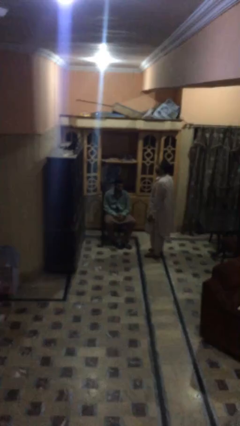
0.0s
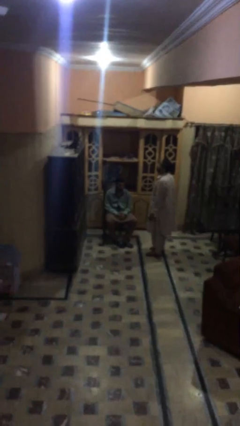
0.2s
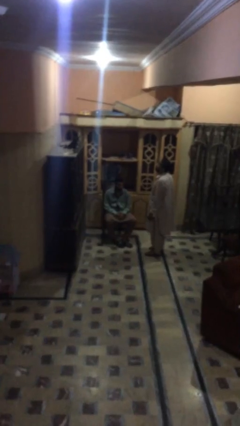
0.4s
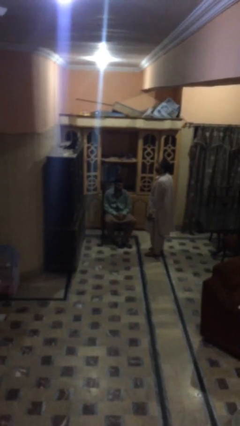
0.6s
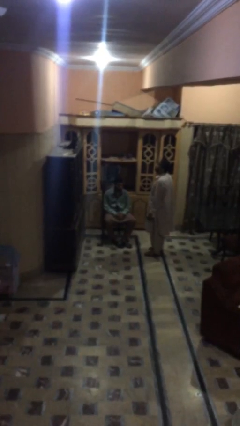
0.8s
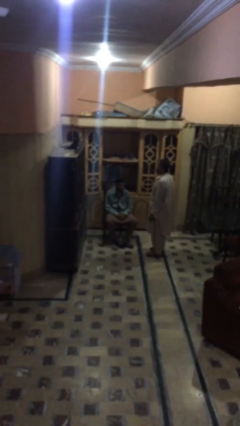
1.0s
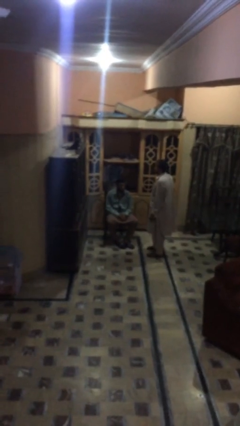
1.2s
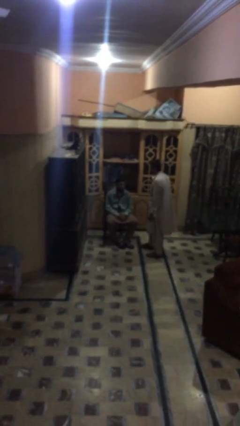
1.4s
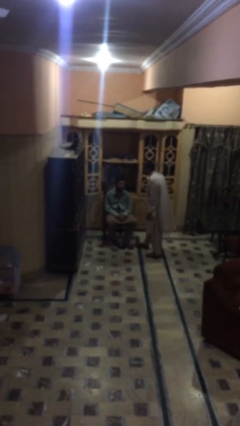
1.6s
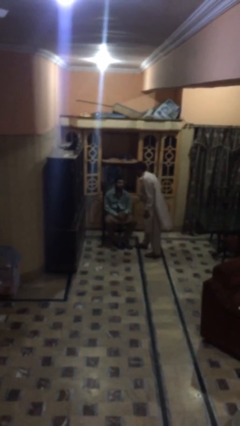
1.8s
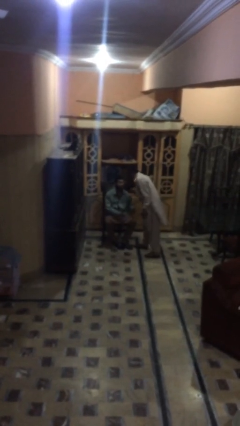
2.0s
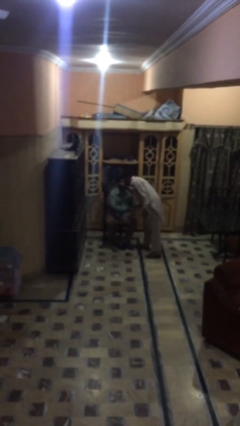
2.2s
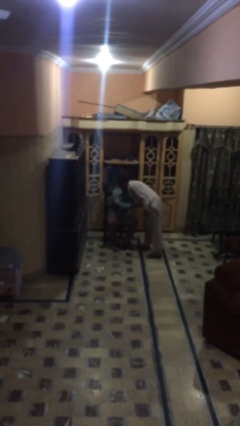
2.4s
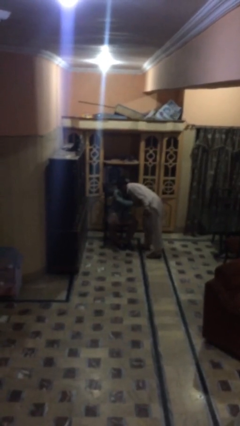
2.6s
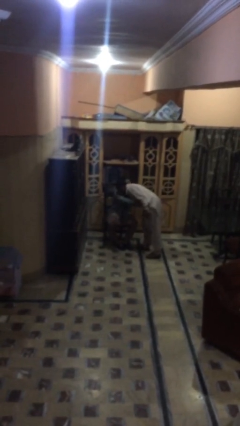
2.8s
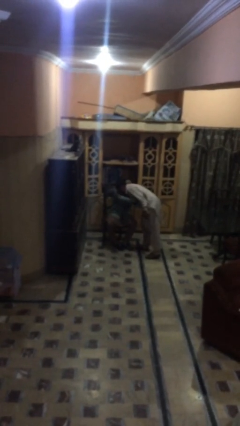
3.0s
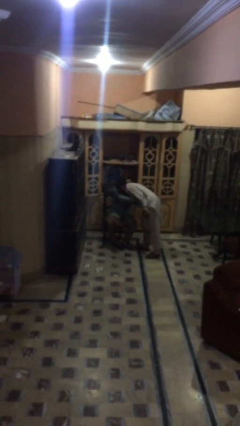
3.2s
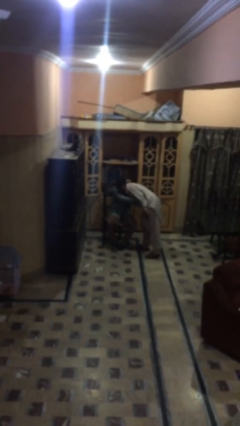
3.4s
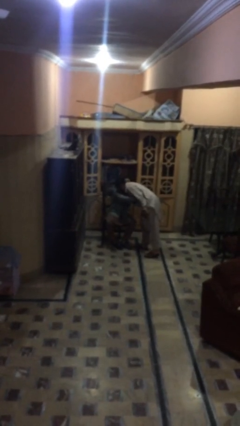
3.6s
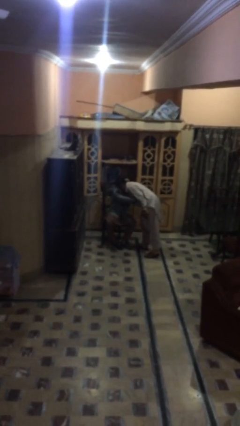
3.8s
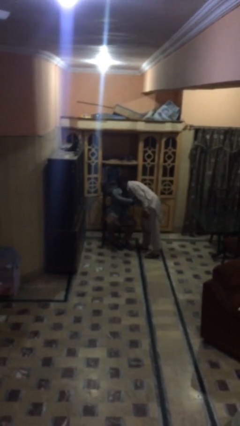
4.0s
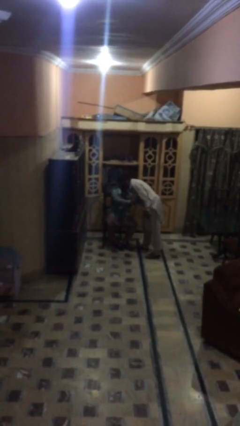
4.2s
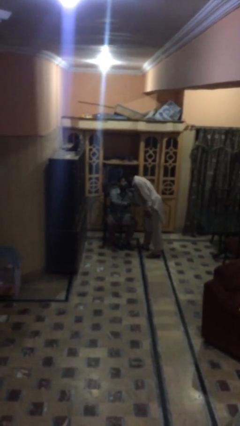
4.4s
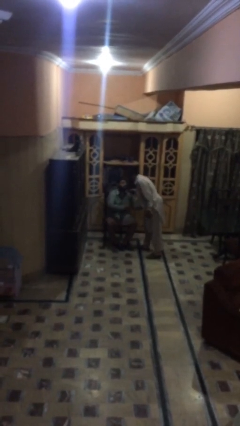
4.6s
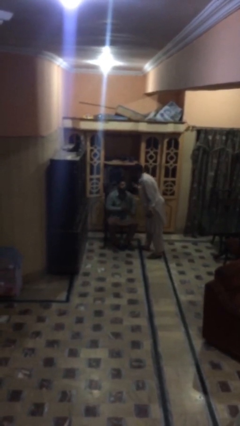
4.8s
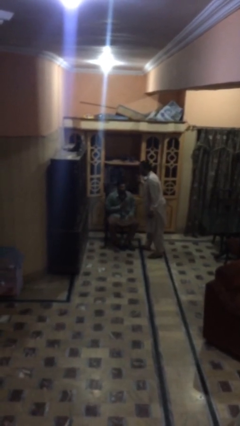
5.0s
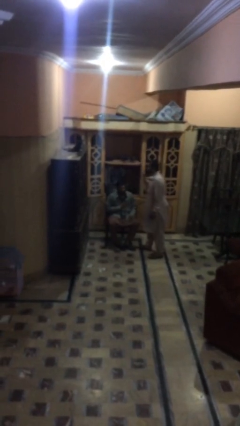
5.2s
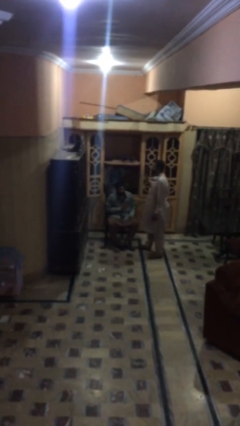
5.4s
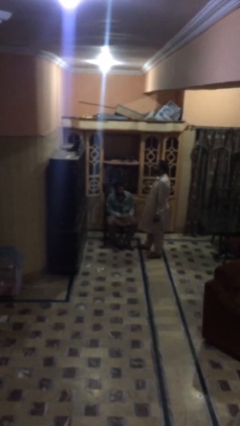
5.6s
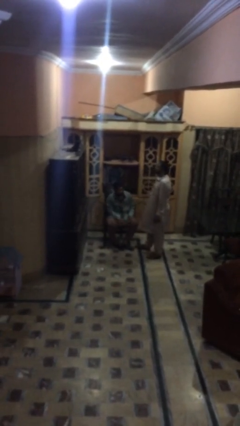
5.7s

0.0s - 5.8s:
person embraces person

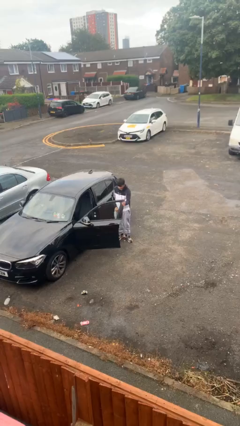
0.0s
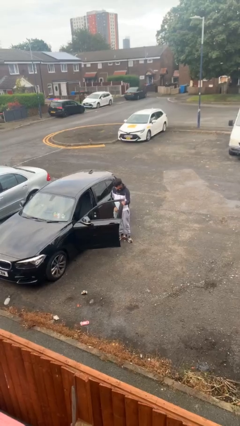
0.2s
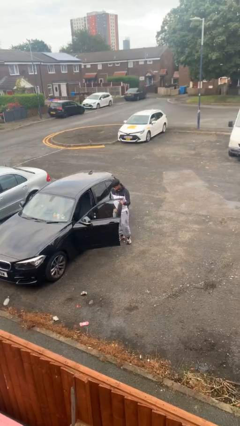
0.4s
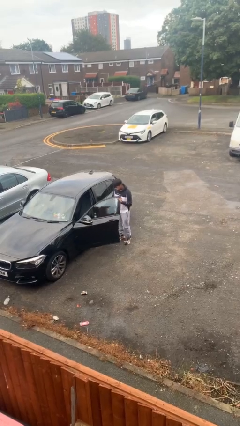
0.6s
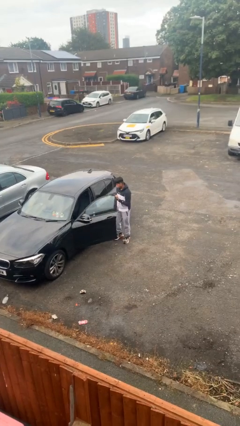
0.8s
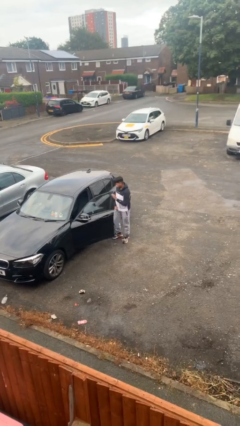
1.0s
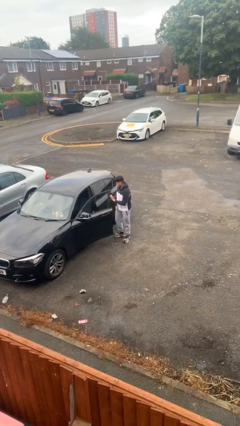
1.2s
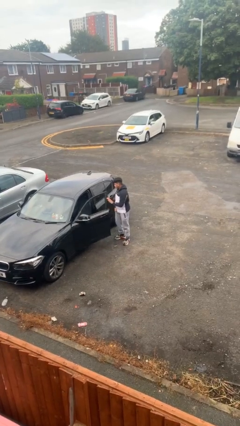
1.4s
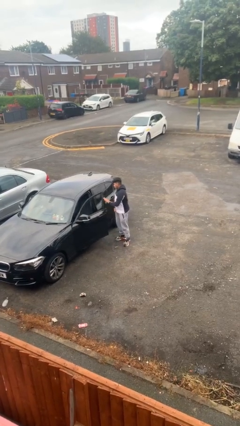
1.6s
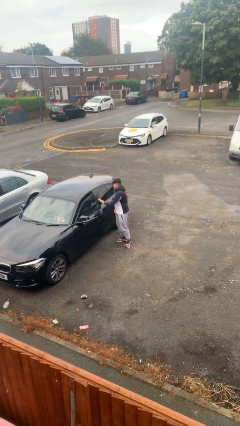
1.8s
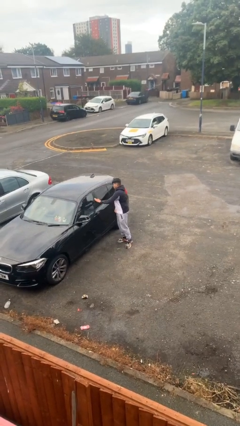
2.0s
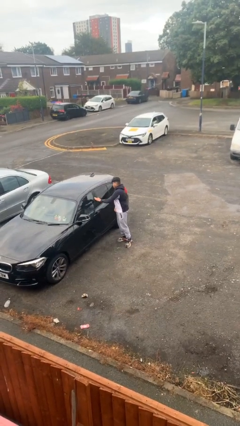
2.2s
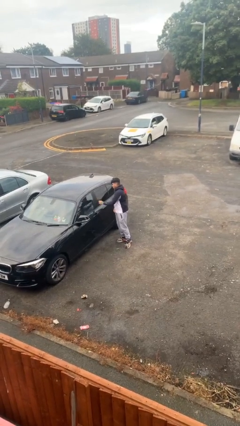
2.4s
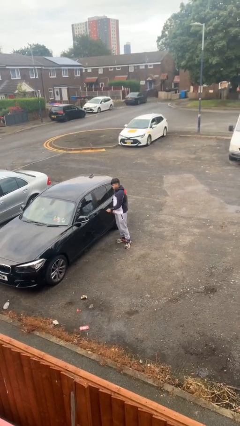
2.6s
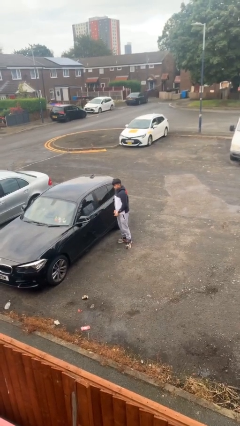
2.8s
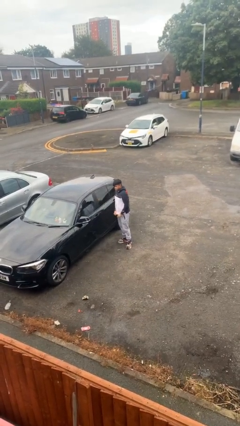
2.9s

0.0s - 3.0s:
person closes car door

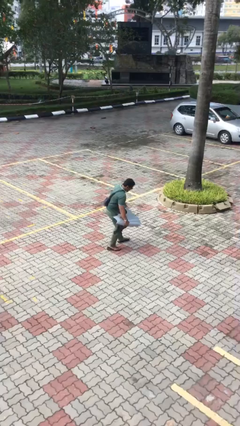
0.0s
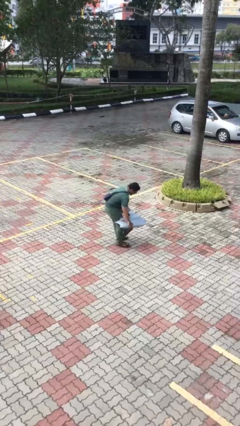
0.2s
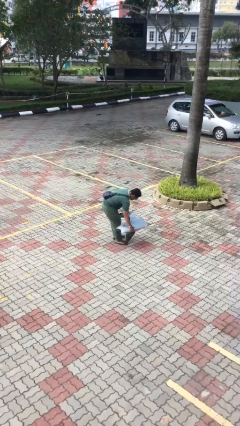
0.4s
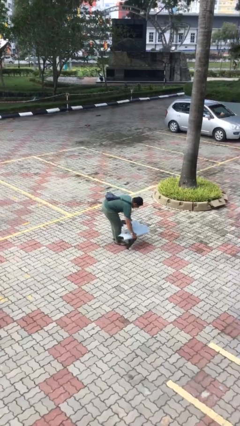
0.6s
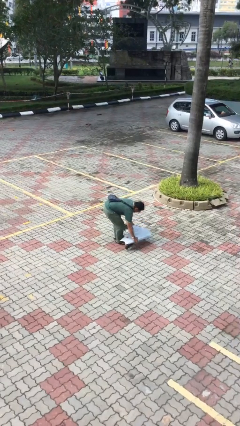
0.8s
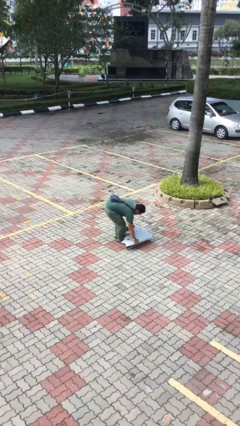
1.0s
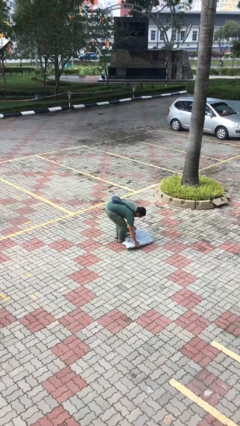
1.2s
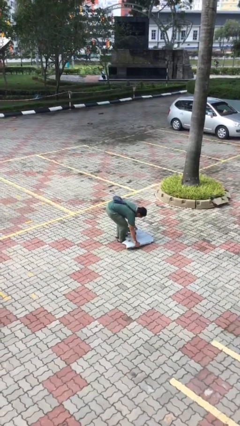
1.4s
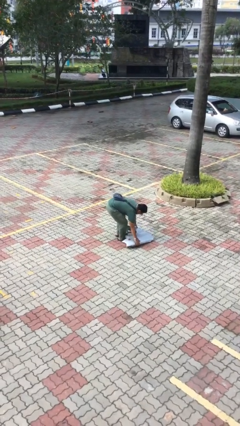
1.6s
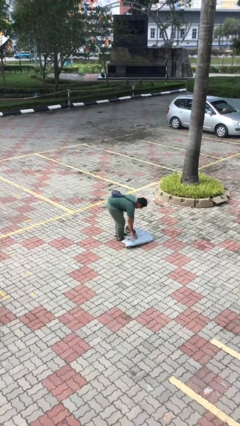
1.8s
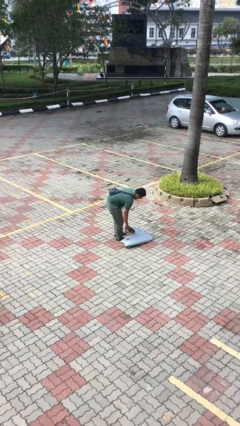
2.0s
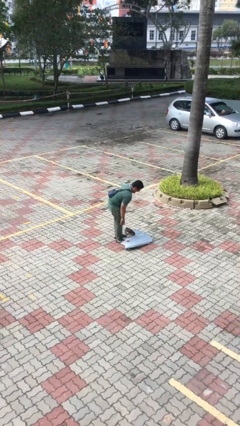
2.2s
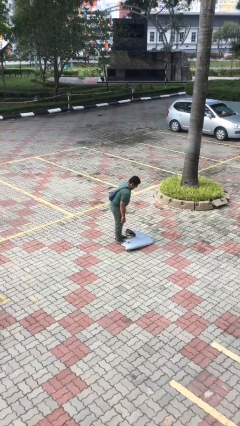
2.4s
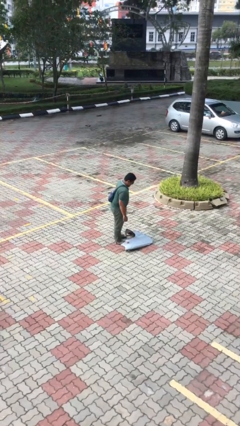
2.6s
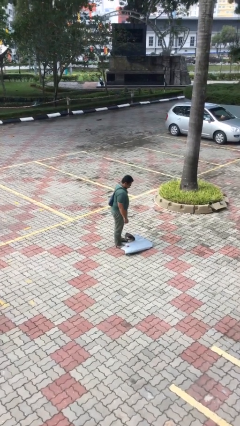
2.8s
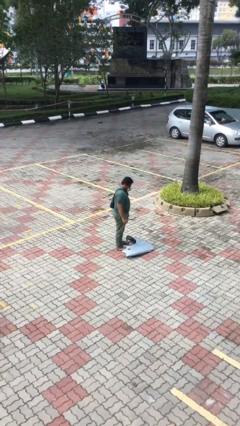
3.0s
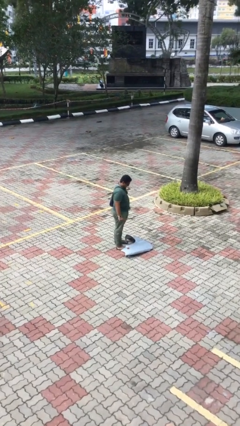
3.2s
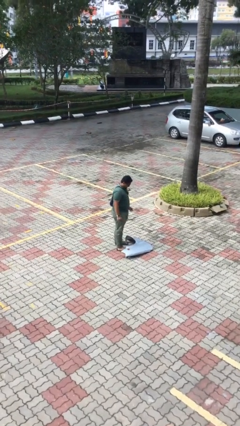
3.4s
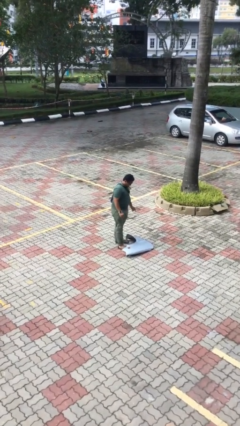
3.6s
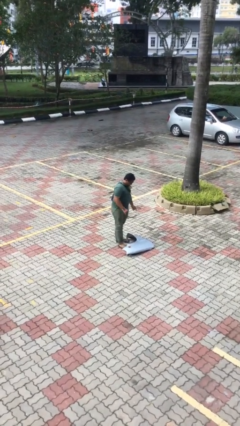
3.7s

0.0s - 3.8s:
person puts down object on floor

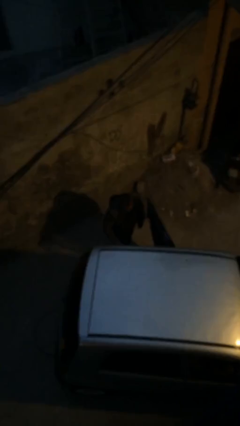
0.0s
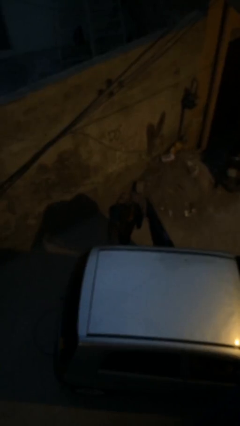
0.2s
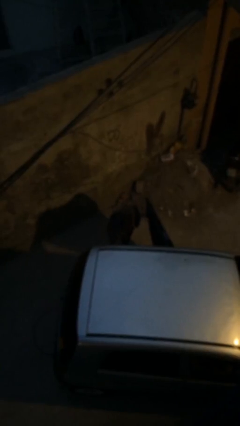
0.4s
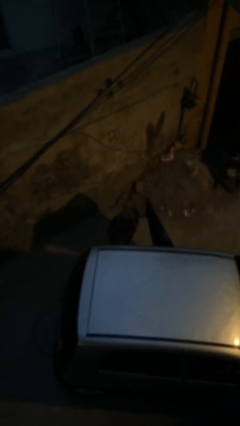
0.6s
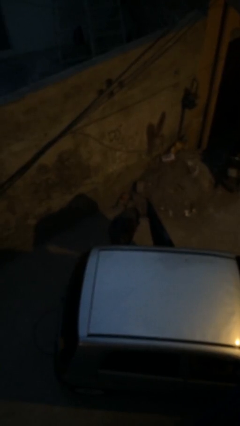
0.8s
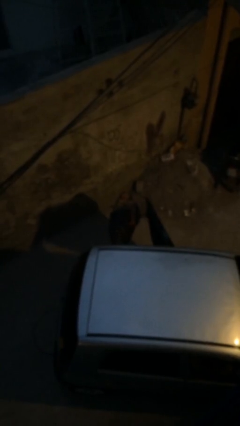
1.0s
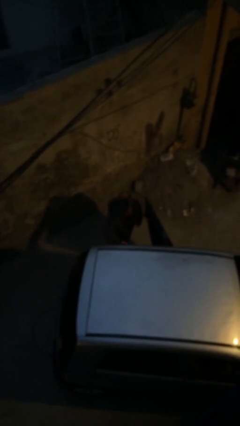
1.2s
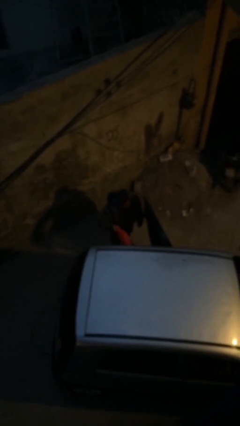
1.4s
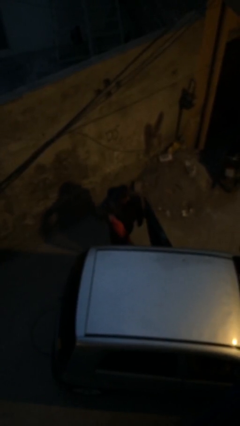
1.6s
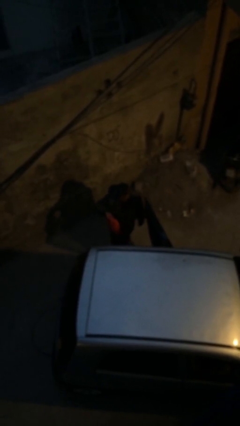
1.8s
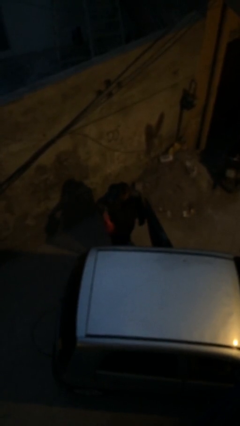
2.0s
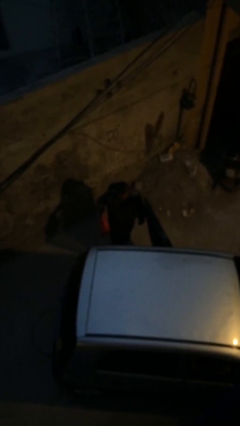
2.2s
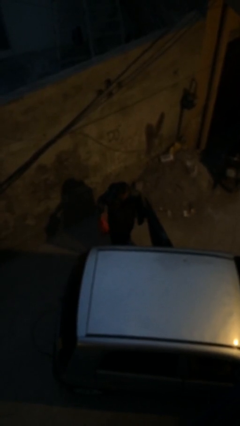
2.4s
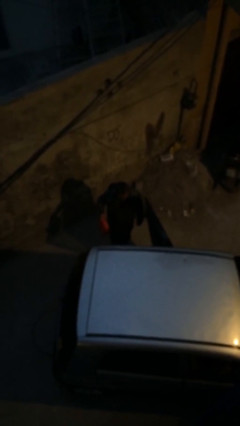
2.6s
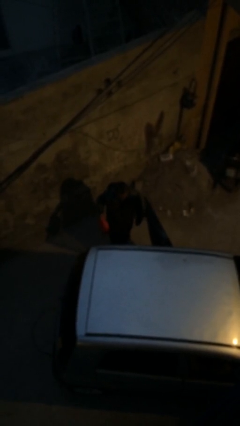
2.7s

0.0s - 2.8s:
person unloads car

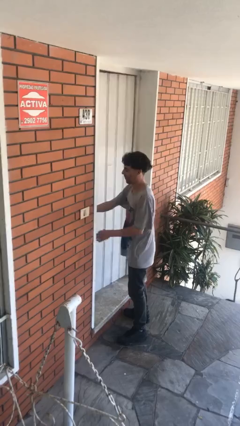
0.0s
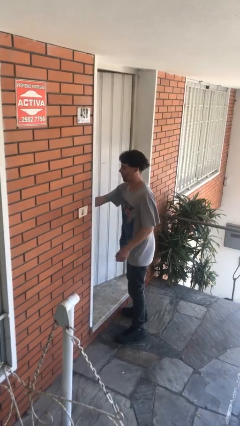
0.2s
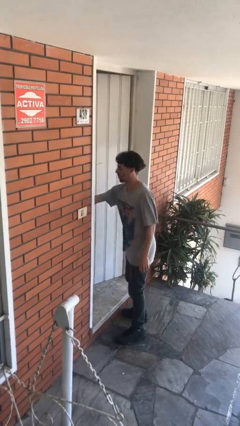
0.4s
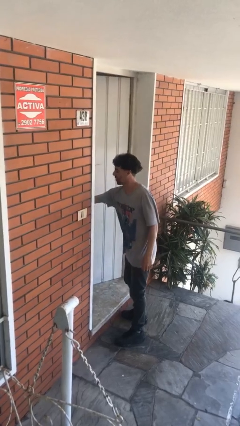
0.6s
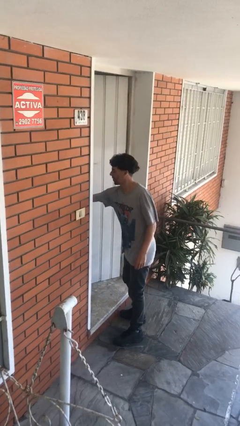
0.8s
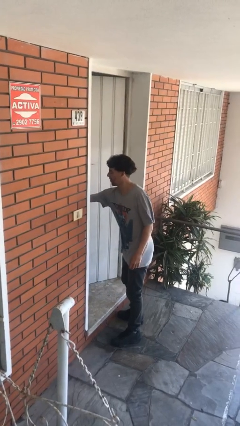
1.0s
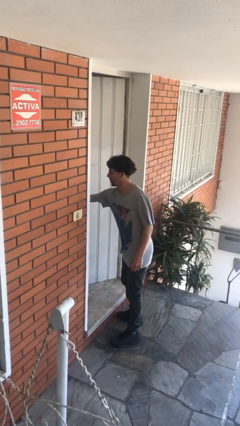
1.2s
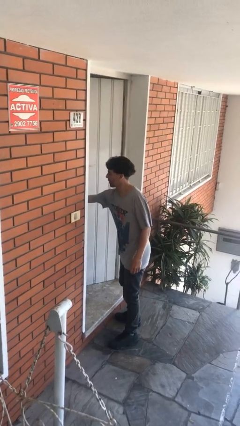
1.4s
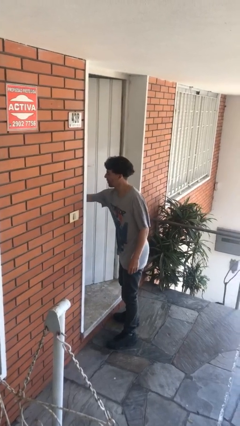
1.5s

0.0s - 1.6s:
person opens facility door

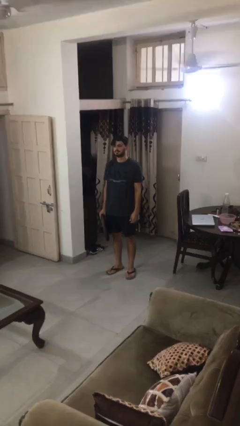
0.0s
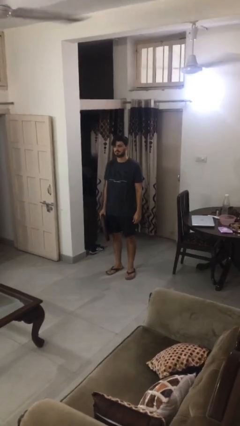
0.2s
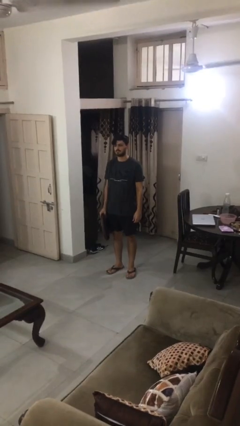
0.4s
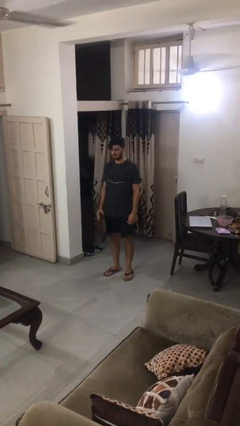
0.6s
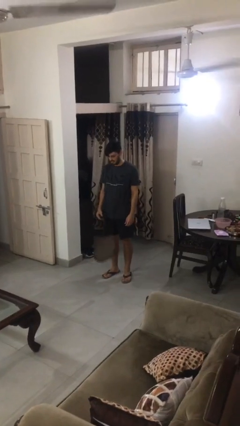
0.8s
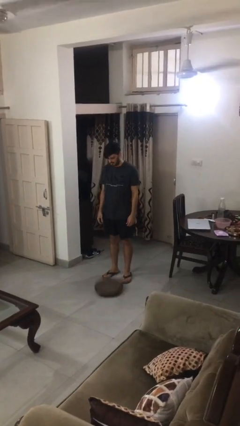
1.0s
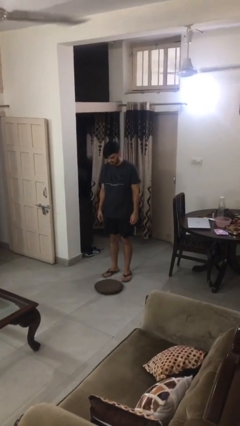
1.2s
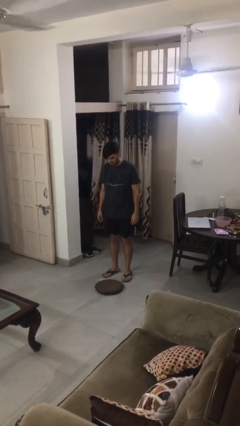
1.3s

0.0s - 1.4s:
person drops object
